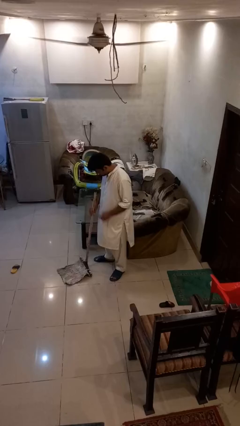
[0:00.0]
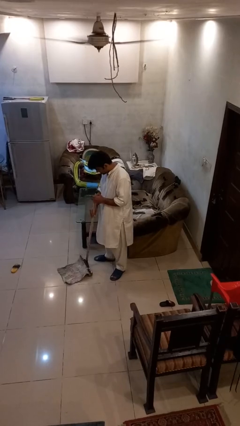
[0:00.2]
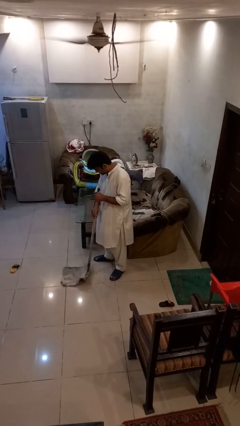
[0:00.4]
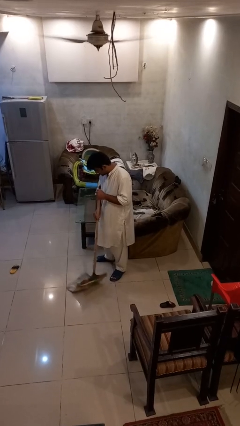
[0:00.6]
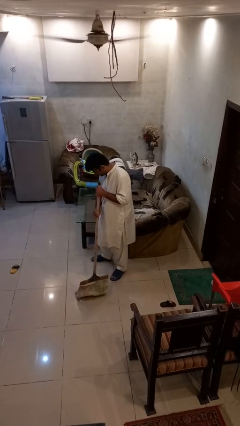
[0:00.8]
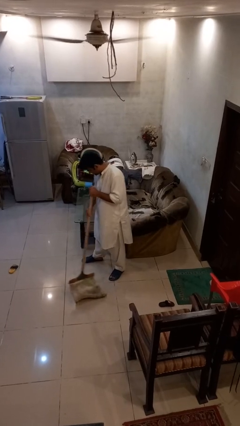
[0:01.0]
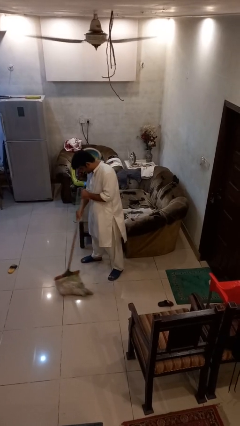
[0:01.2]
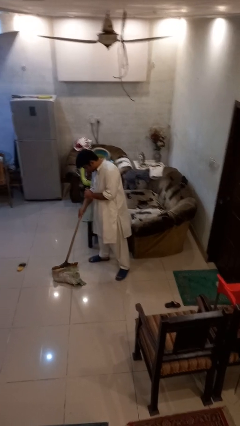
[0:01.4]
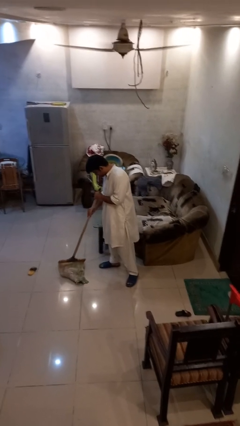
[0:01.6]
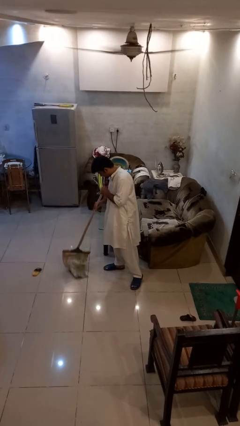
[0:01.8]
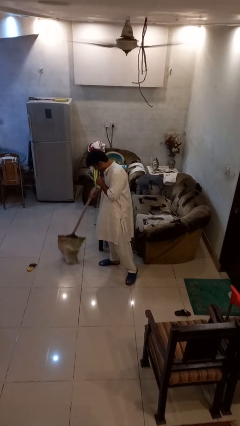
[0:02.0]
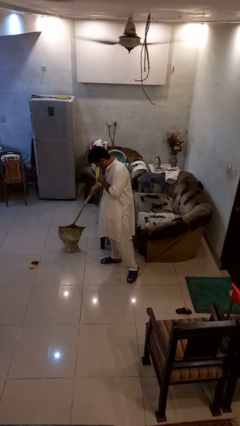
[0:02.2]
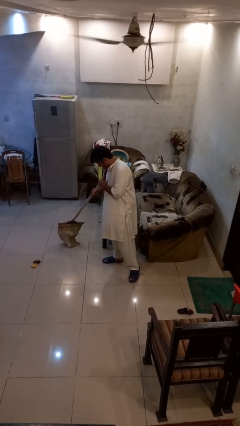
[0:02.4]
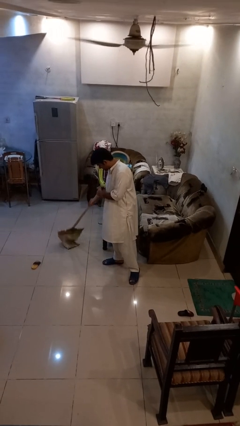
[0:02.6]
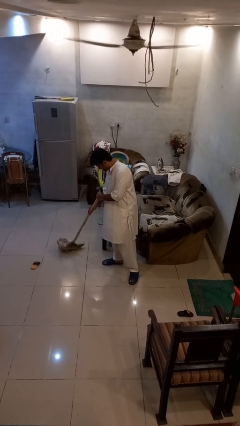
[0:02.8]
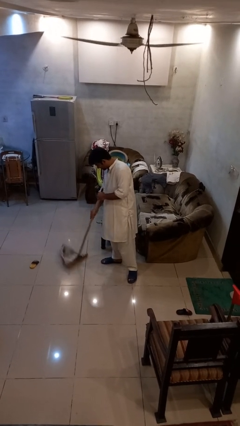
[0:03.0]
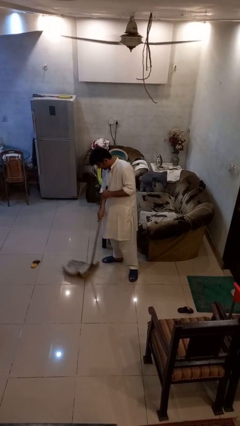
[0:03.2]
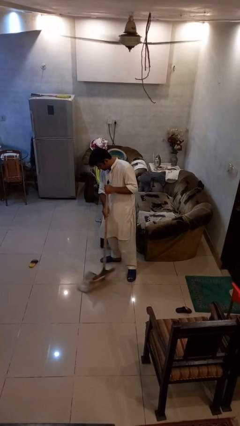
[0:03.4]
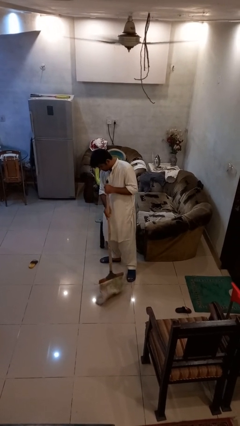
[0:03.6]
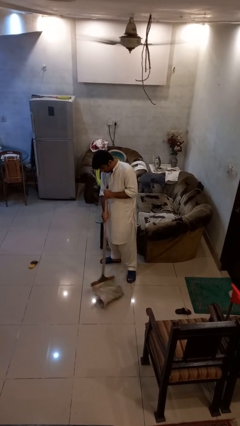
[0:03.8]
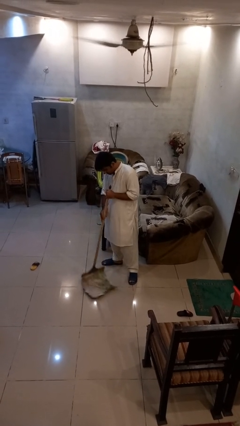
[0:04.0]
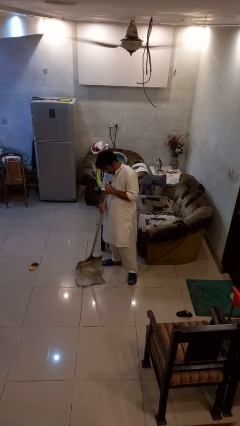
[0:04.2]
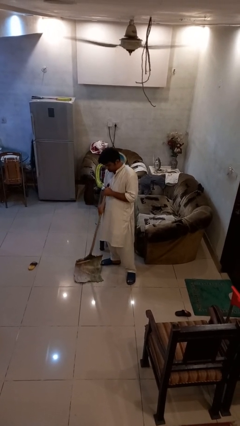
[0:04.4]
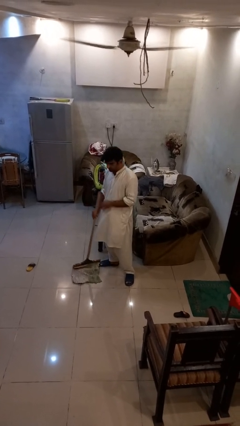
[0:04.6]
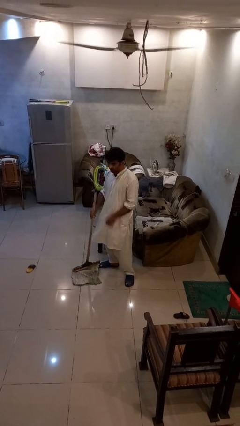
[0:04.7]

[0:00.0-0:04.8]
person mops

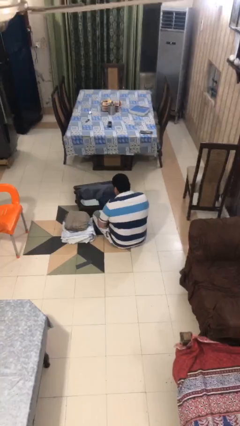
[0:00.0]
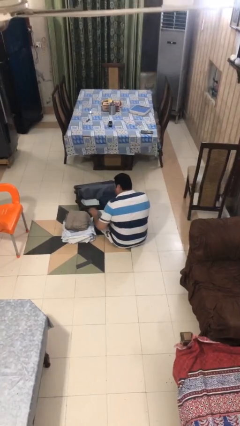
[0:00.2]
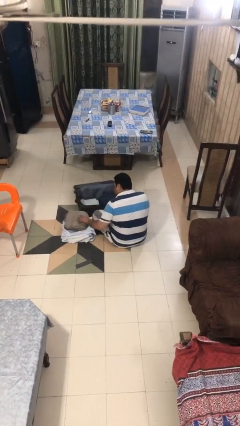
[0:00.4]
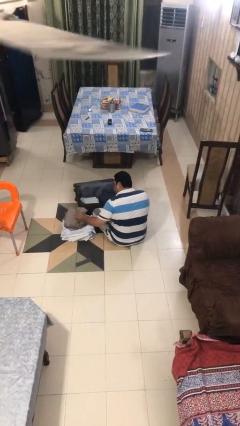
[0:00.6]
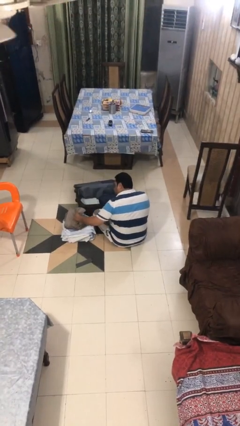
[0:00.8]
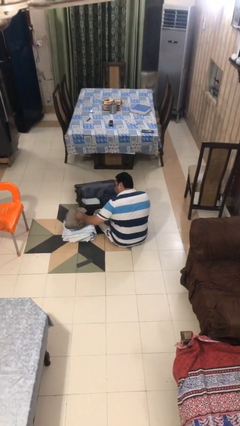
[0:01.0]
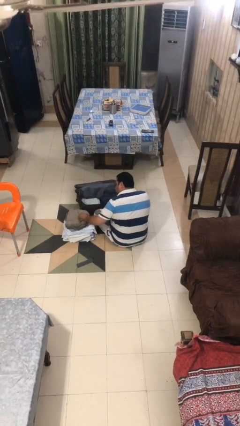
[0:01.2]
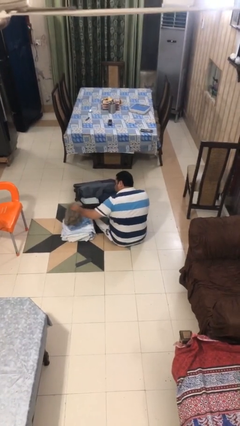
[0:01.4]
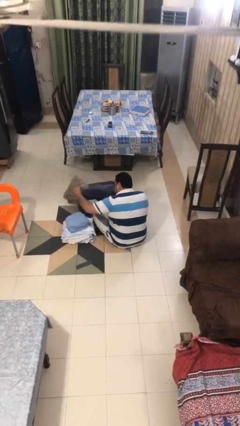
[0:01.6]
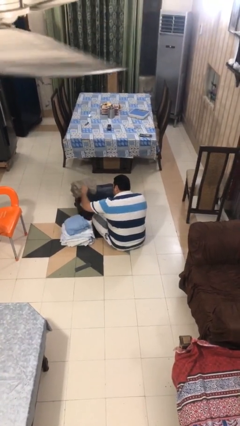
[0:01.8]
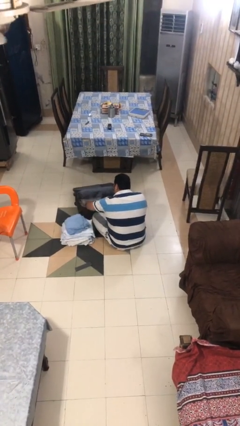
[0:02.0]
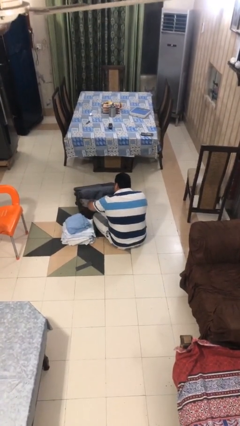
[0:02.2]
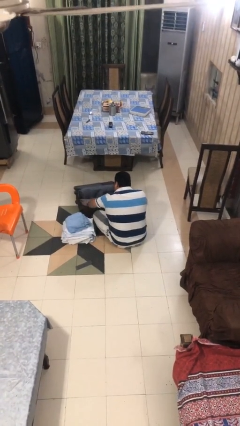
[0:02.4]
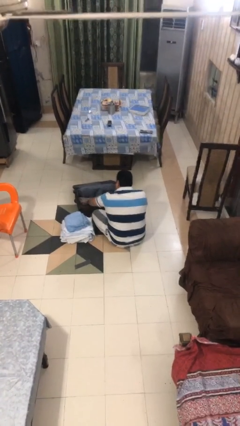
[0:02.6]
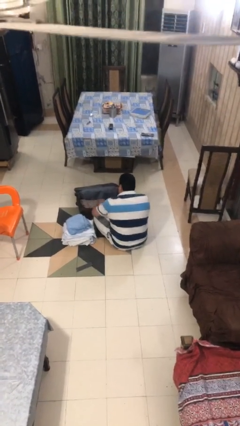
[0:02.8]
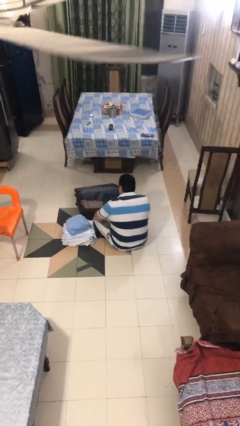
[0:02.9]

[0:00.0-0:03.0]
person loads clothes into suitcase

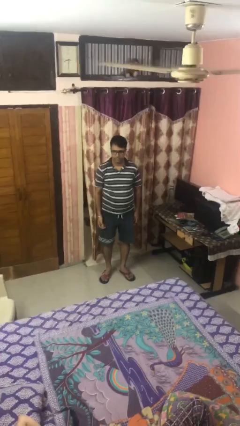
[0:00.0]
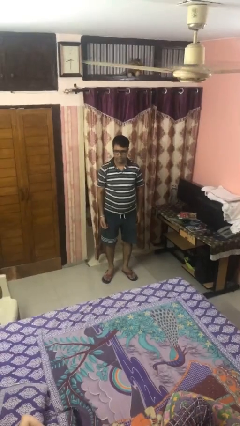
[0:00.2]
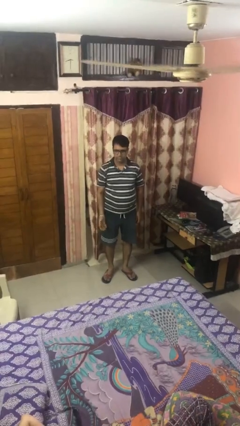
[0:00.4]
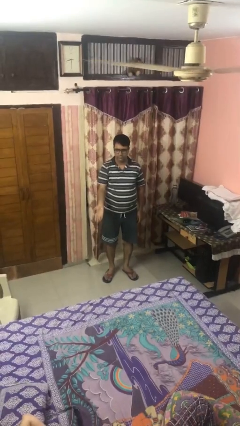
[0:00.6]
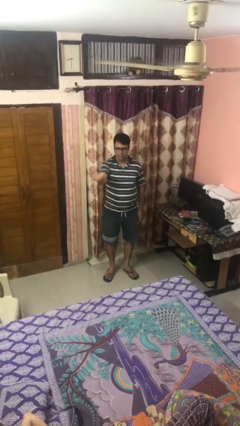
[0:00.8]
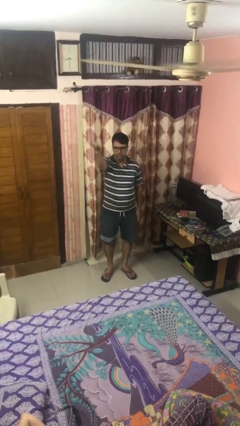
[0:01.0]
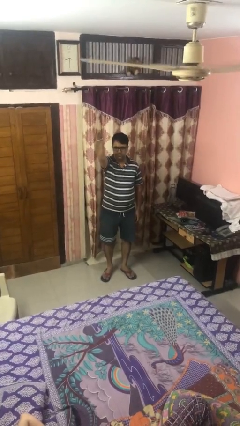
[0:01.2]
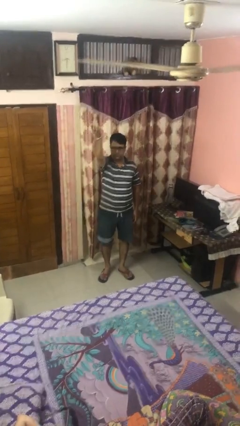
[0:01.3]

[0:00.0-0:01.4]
person gestures swipe up

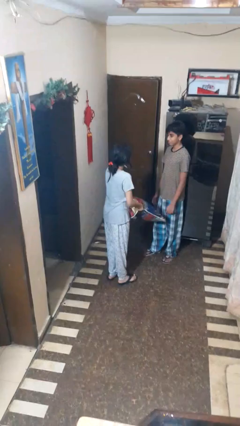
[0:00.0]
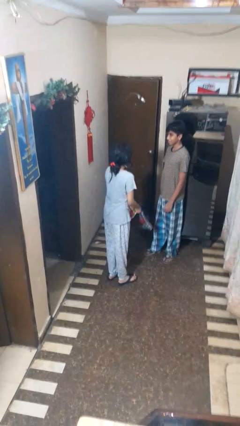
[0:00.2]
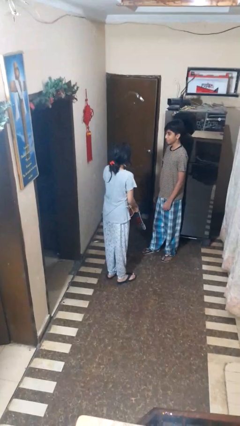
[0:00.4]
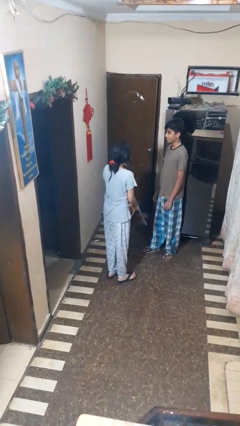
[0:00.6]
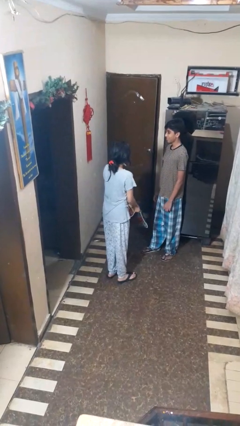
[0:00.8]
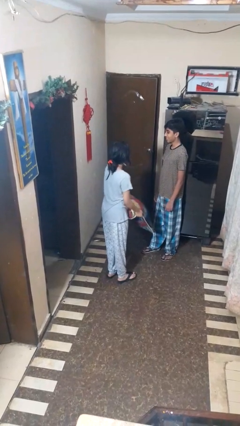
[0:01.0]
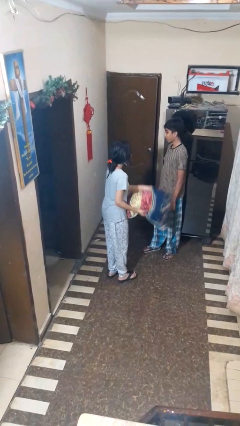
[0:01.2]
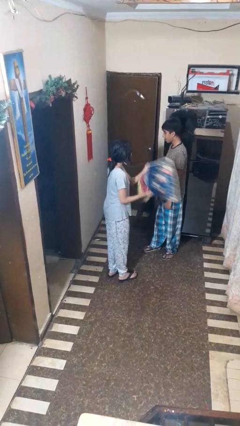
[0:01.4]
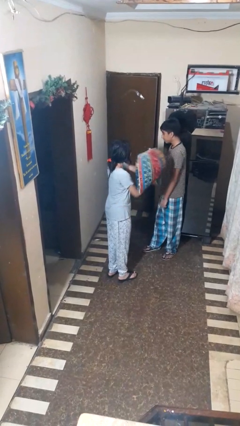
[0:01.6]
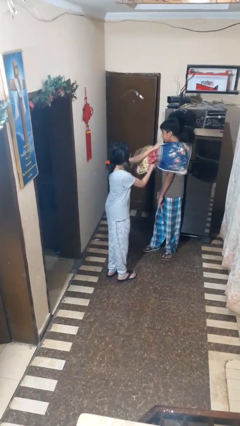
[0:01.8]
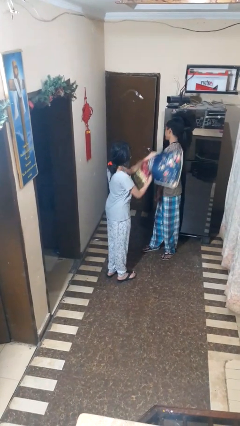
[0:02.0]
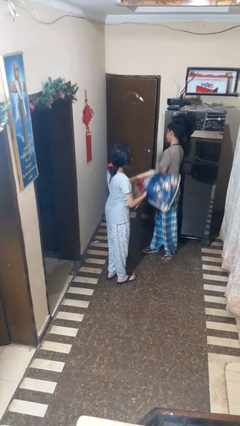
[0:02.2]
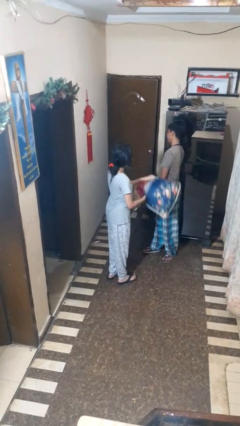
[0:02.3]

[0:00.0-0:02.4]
person hits person with pillow

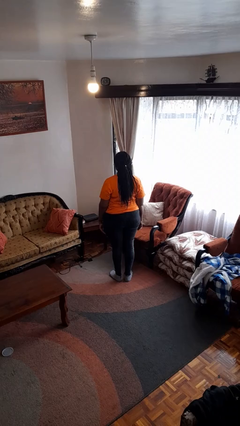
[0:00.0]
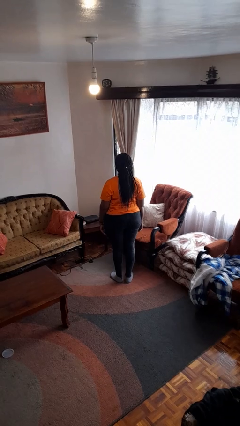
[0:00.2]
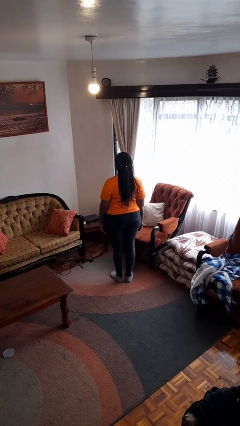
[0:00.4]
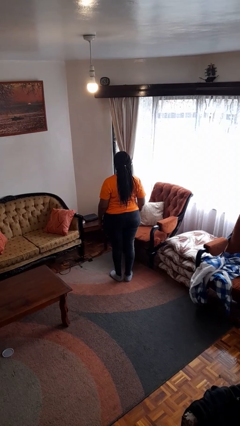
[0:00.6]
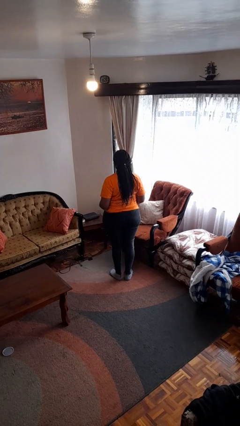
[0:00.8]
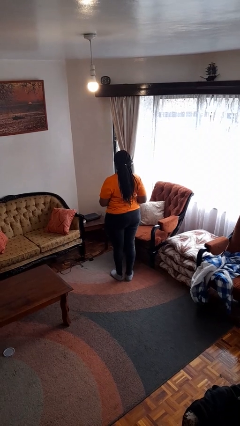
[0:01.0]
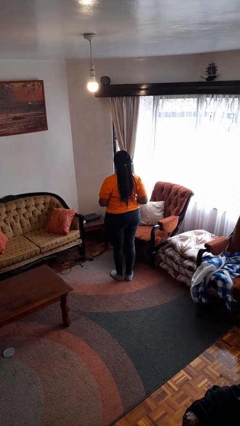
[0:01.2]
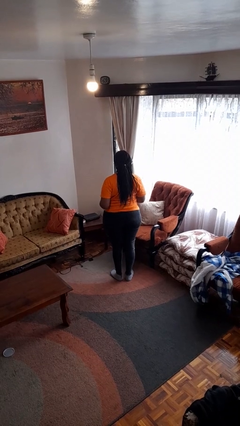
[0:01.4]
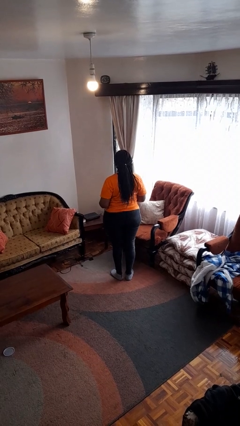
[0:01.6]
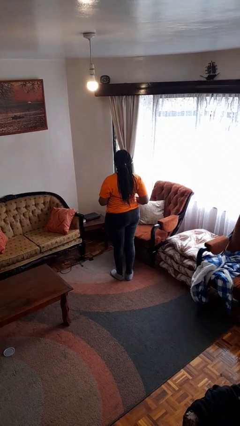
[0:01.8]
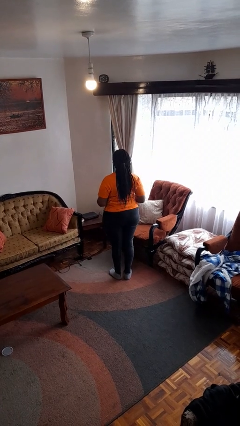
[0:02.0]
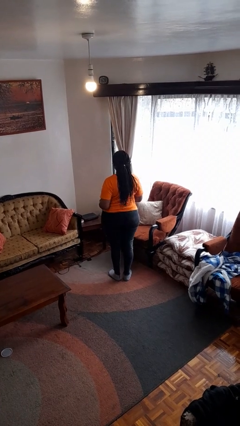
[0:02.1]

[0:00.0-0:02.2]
person wiggles hips

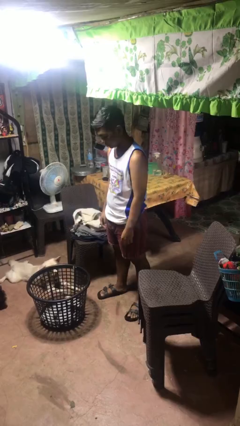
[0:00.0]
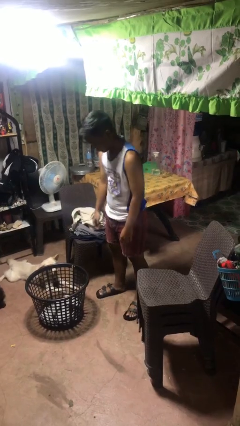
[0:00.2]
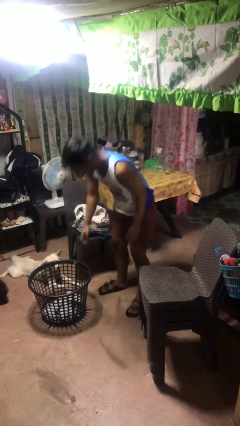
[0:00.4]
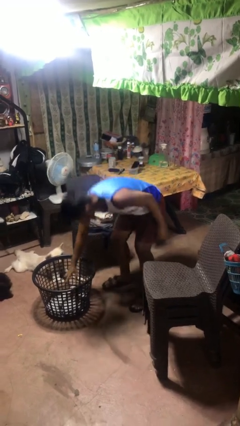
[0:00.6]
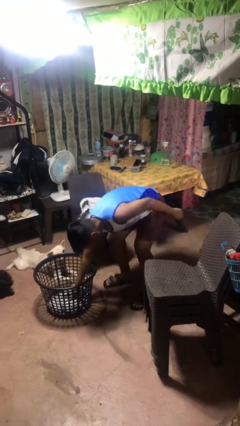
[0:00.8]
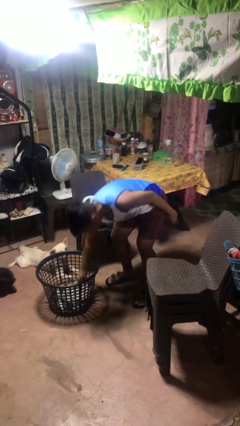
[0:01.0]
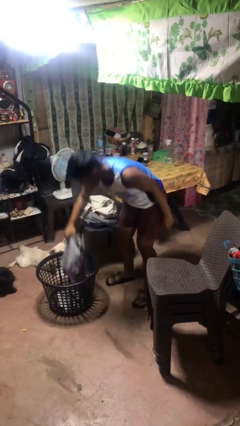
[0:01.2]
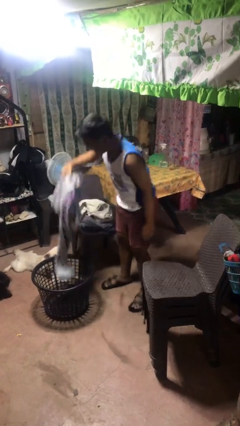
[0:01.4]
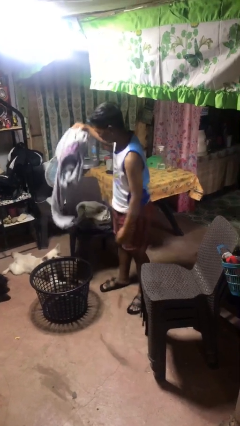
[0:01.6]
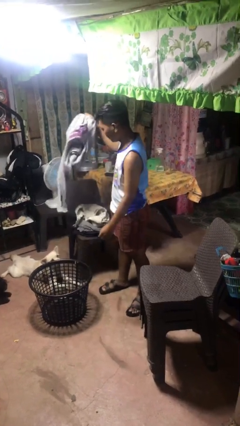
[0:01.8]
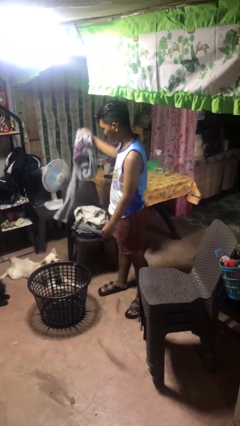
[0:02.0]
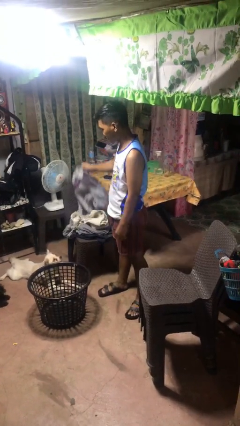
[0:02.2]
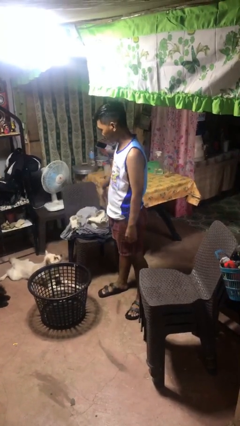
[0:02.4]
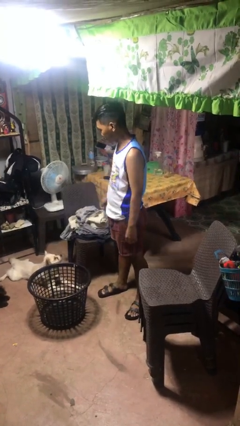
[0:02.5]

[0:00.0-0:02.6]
person takes object from basket

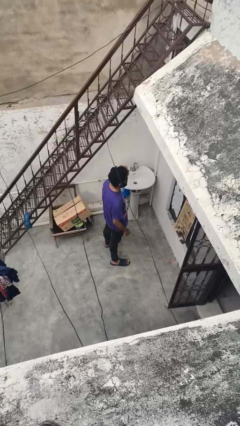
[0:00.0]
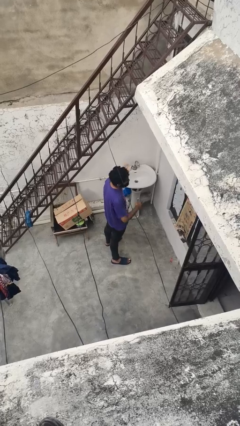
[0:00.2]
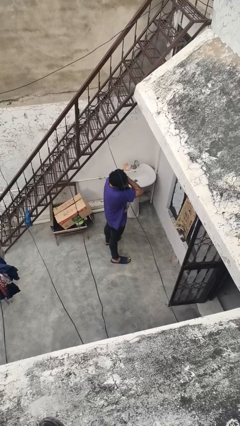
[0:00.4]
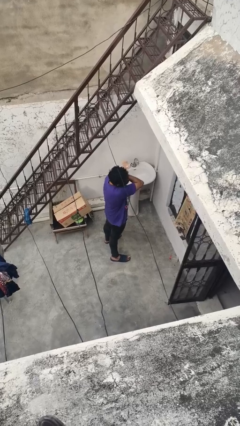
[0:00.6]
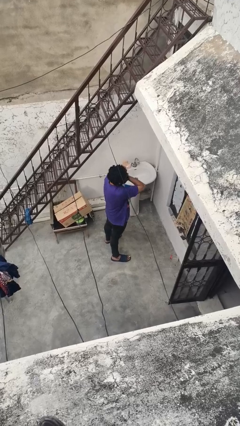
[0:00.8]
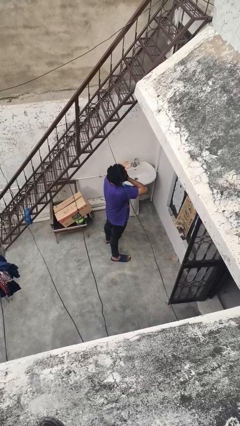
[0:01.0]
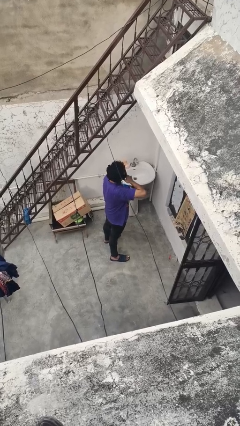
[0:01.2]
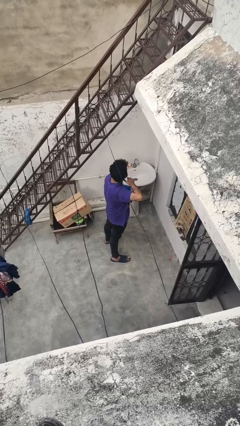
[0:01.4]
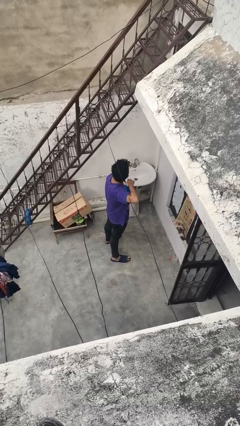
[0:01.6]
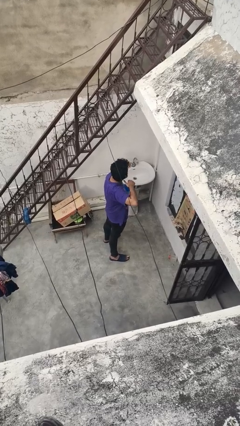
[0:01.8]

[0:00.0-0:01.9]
person gestures cut
